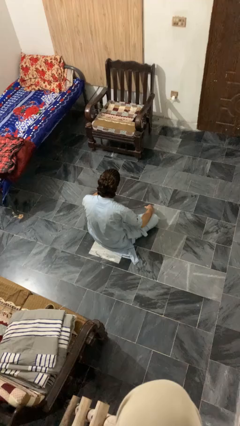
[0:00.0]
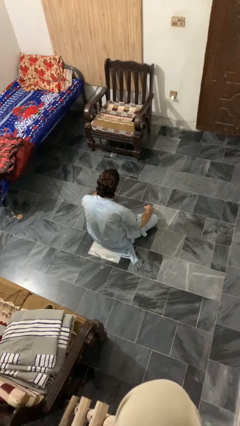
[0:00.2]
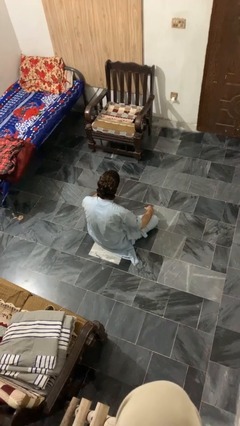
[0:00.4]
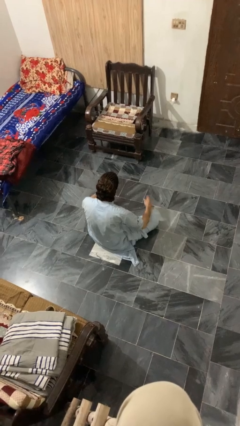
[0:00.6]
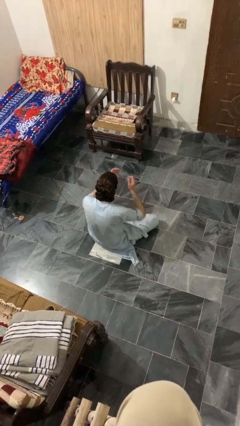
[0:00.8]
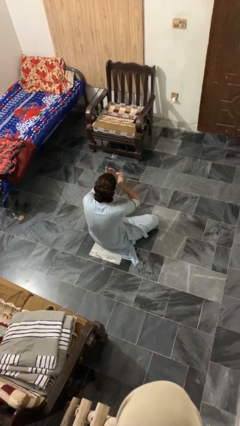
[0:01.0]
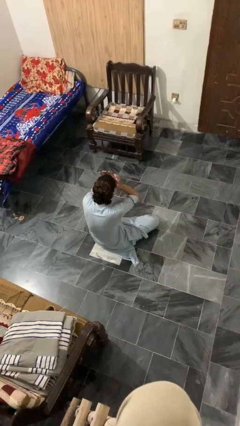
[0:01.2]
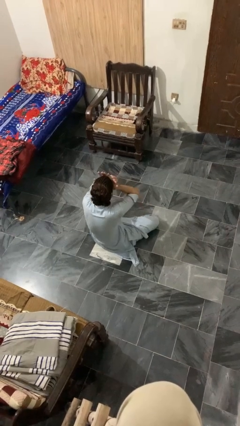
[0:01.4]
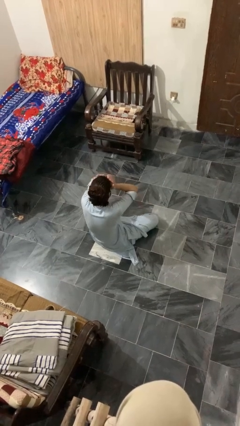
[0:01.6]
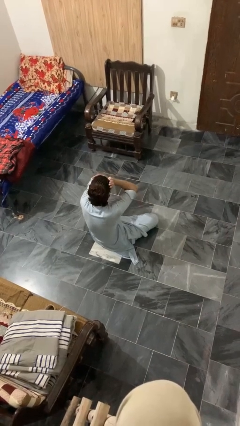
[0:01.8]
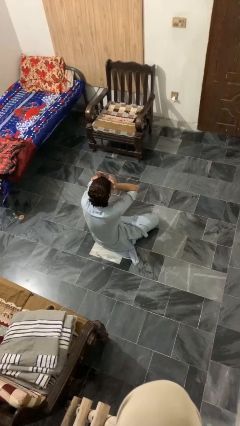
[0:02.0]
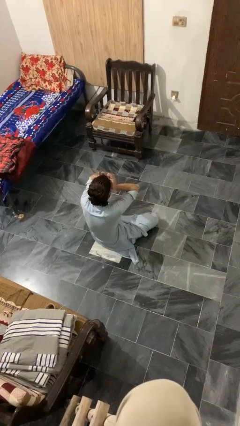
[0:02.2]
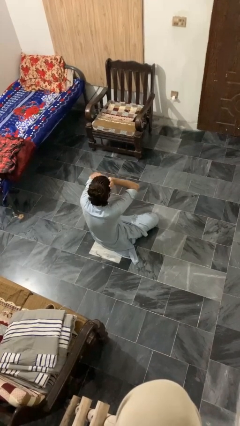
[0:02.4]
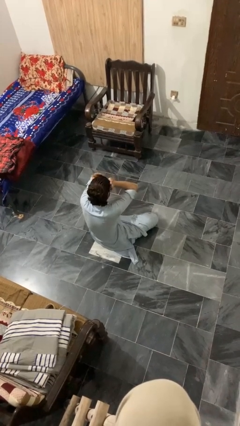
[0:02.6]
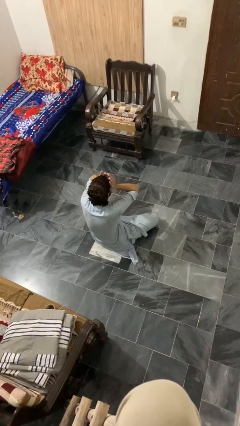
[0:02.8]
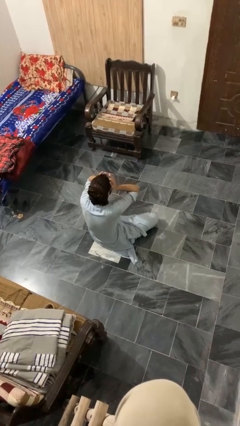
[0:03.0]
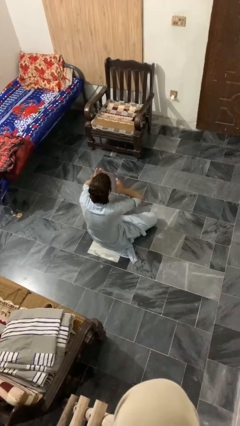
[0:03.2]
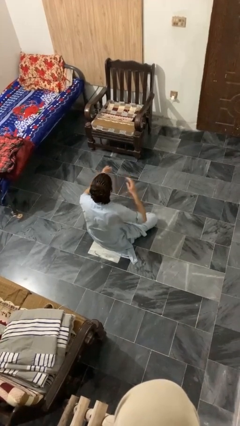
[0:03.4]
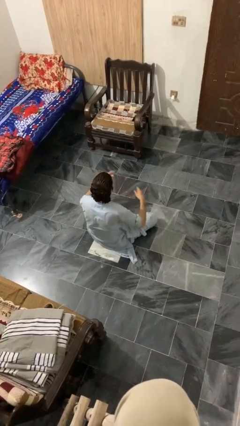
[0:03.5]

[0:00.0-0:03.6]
person rubs eyes

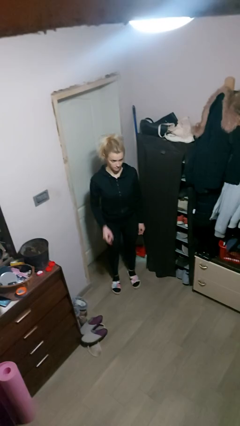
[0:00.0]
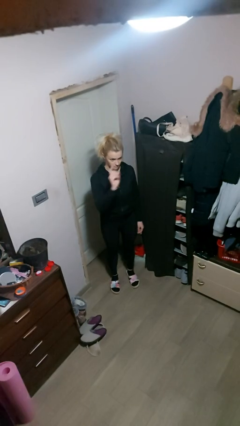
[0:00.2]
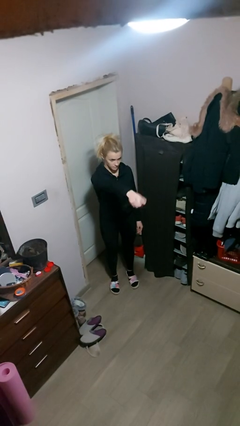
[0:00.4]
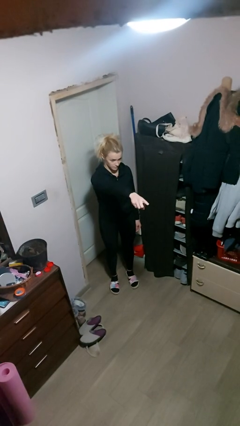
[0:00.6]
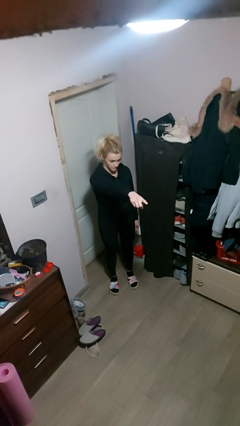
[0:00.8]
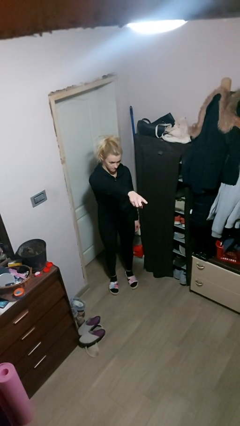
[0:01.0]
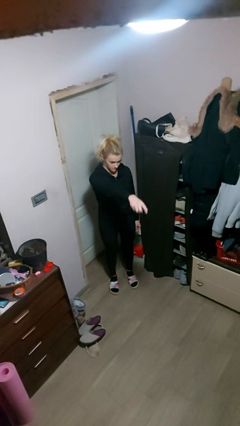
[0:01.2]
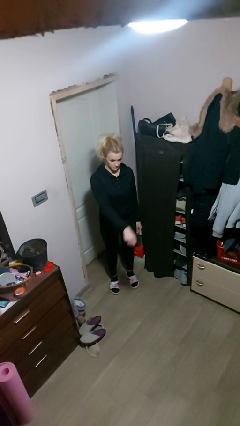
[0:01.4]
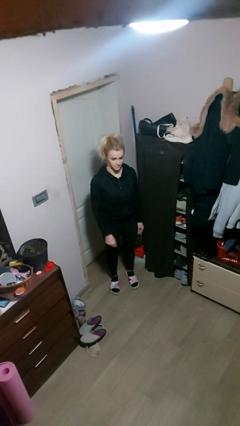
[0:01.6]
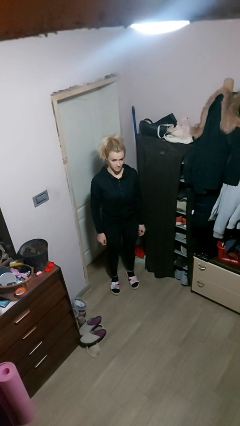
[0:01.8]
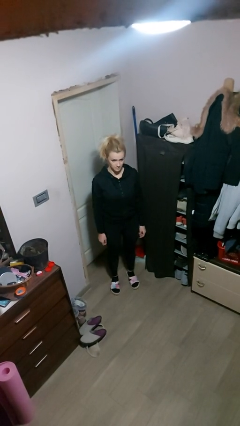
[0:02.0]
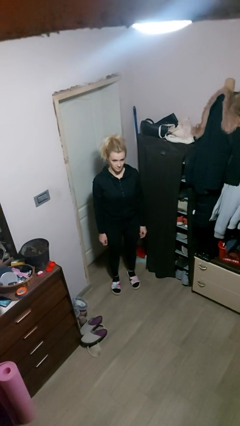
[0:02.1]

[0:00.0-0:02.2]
person points at person

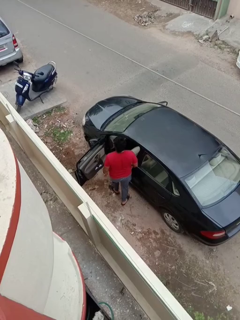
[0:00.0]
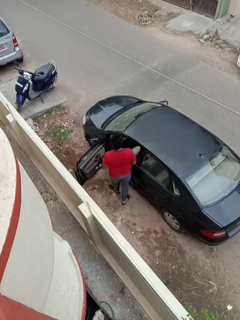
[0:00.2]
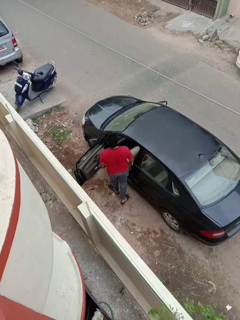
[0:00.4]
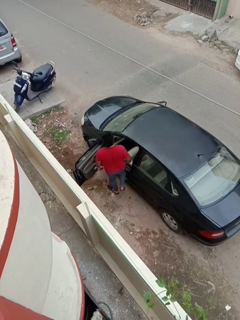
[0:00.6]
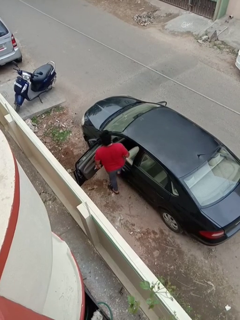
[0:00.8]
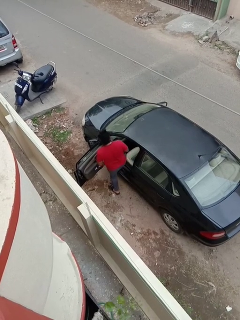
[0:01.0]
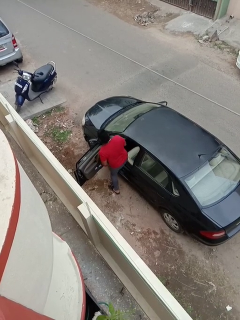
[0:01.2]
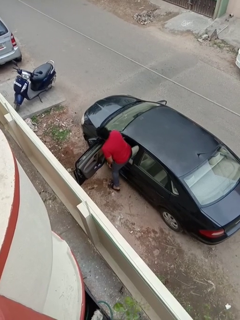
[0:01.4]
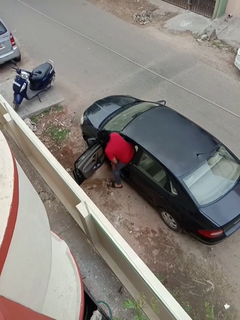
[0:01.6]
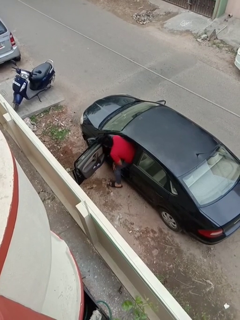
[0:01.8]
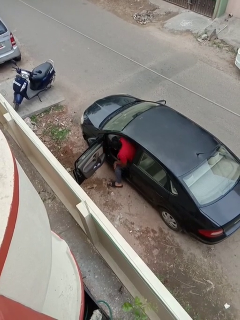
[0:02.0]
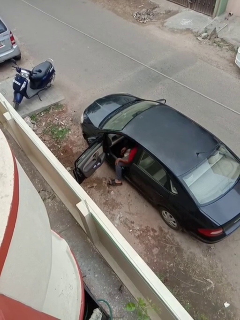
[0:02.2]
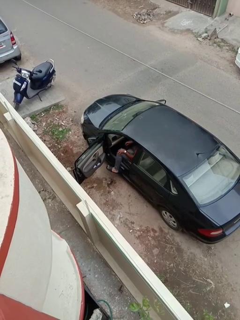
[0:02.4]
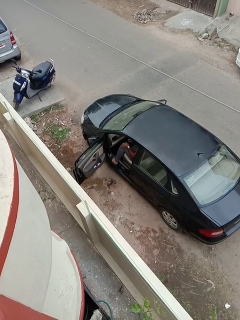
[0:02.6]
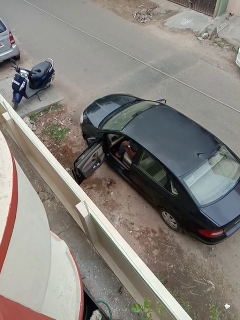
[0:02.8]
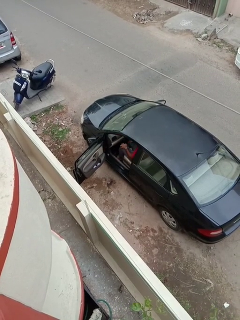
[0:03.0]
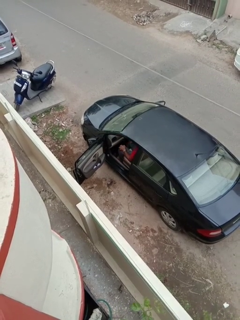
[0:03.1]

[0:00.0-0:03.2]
person enters car

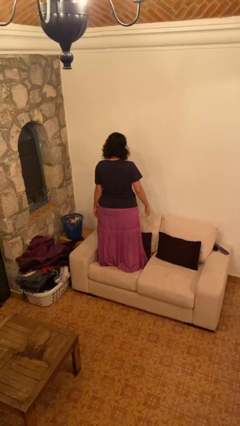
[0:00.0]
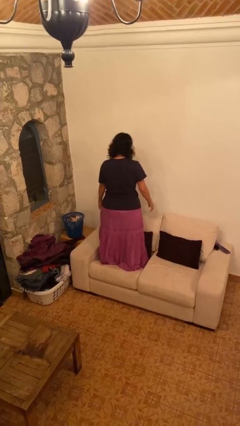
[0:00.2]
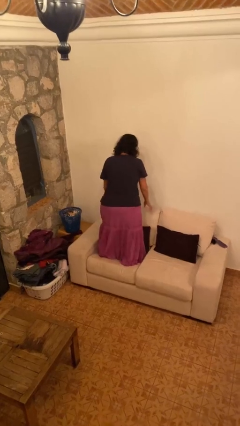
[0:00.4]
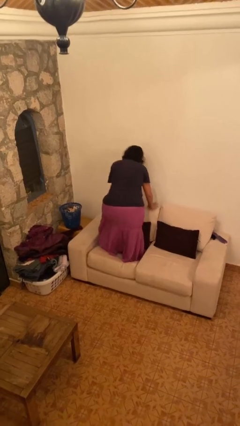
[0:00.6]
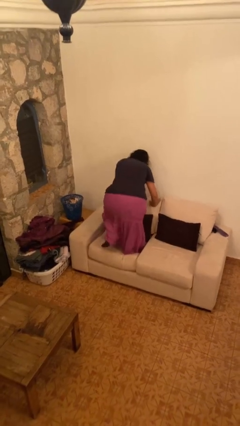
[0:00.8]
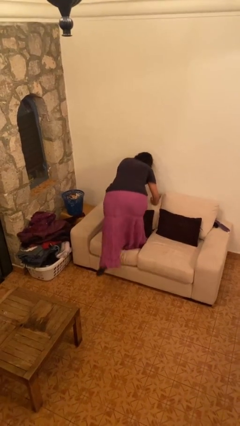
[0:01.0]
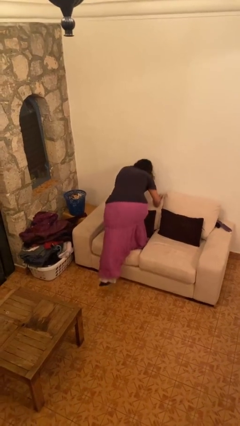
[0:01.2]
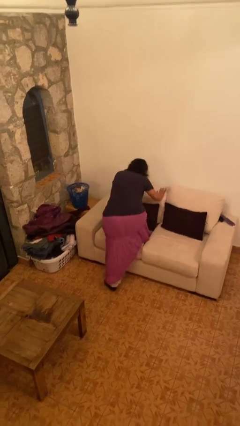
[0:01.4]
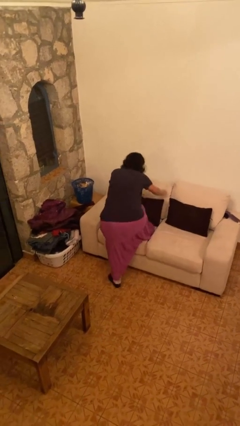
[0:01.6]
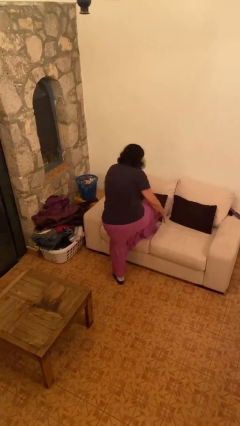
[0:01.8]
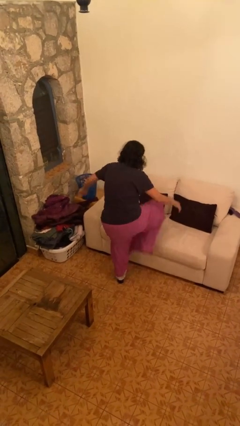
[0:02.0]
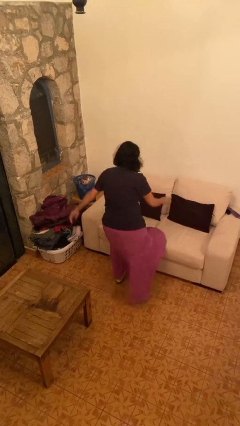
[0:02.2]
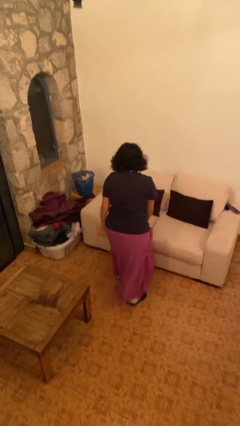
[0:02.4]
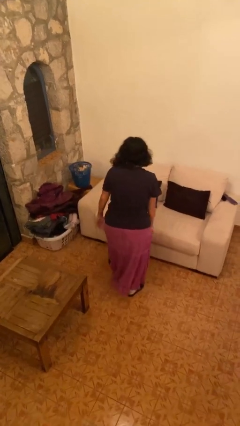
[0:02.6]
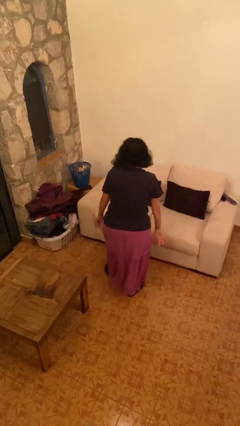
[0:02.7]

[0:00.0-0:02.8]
person climbs off couch

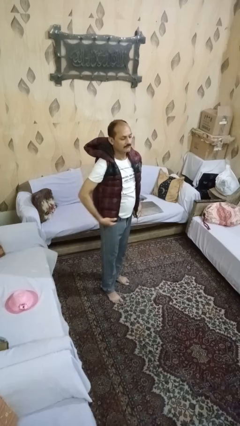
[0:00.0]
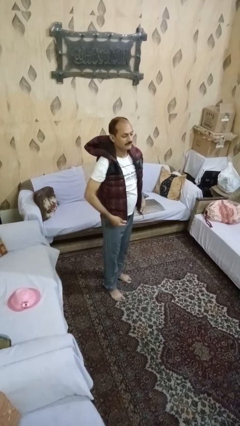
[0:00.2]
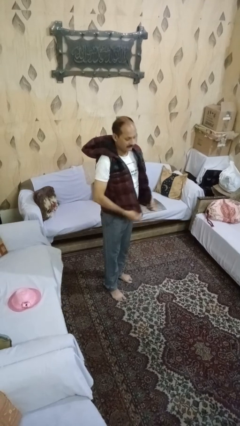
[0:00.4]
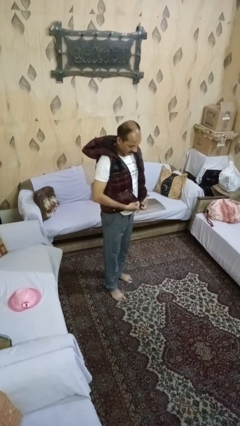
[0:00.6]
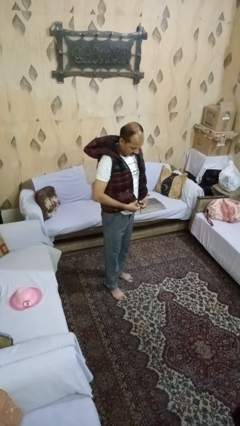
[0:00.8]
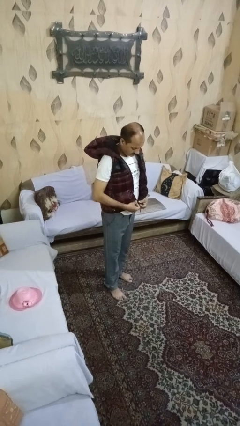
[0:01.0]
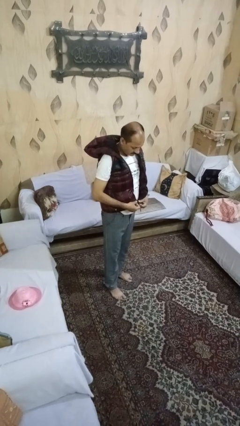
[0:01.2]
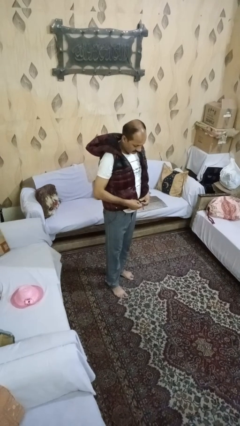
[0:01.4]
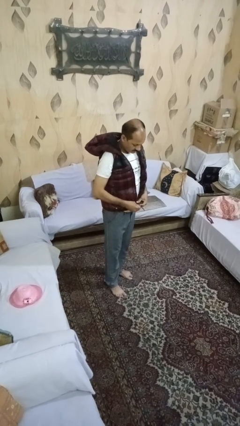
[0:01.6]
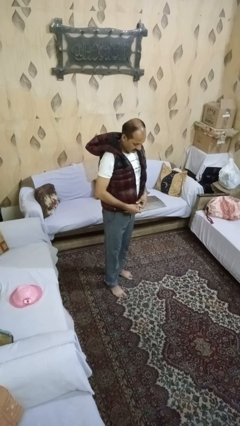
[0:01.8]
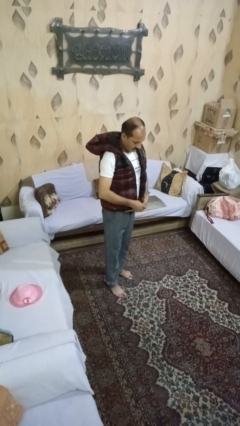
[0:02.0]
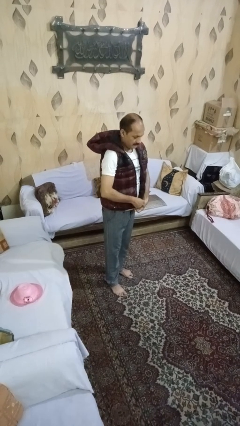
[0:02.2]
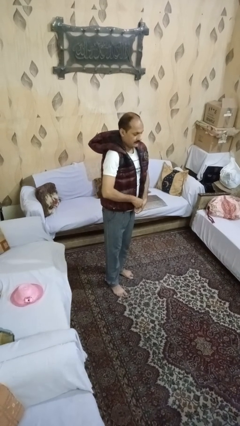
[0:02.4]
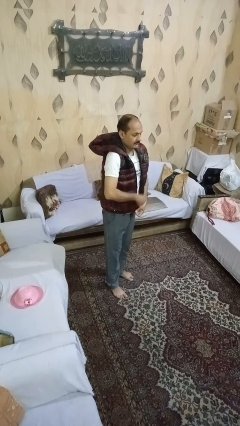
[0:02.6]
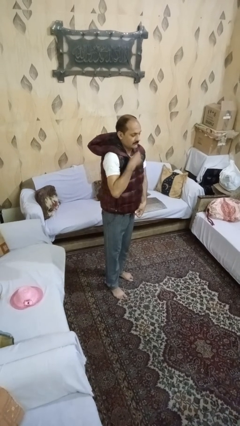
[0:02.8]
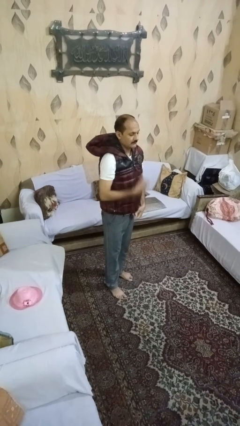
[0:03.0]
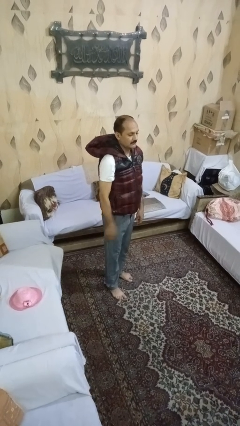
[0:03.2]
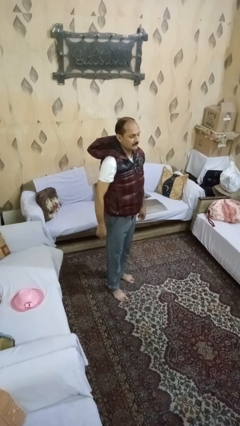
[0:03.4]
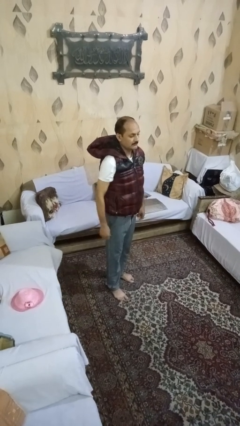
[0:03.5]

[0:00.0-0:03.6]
person zips up jacket

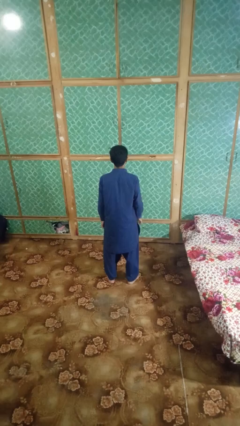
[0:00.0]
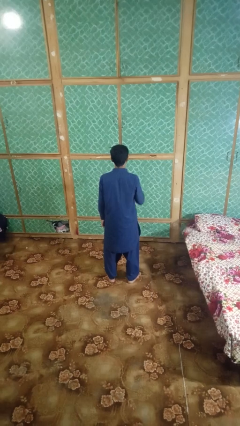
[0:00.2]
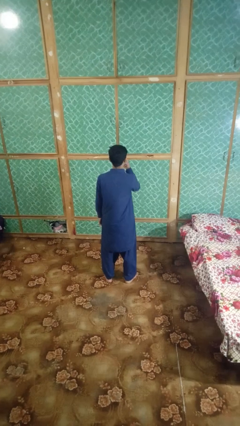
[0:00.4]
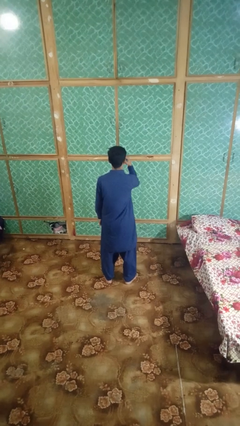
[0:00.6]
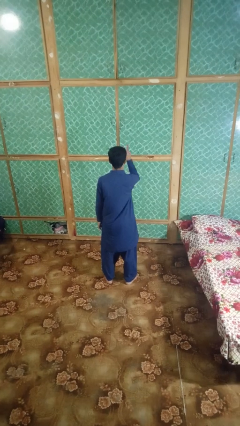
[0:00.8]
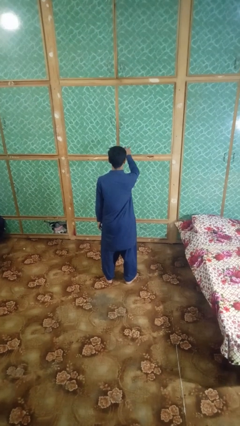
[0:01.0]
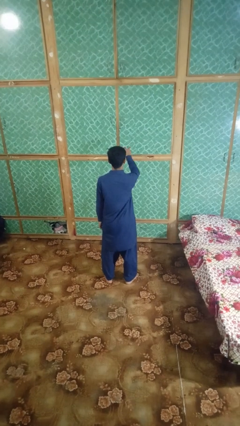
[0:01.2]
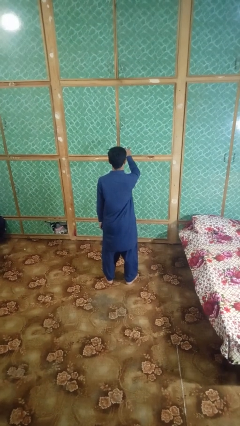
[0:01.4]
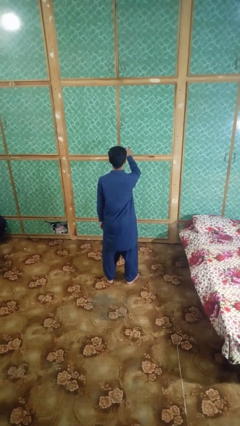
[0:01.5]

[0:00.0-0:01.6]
person gestures watch closely

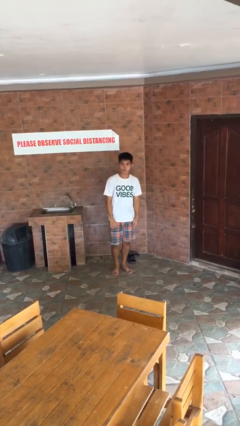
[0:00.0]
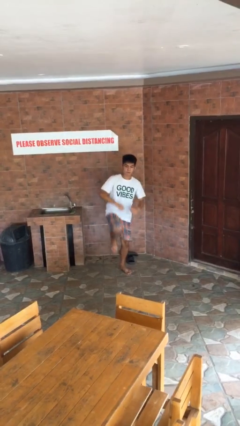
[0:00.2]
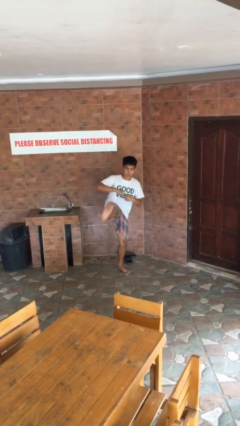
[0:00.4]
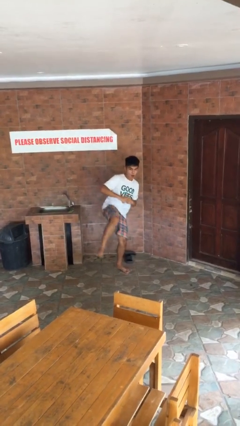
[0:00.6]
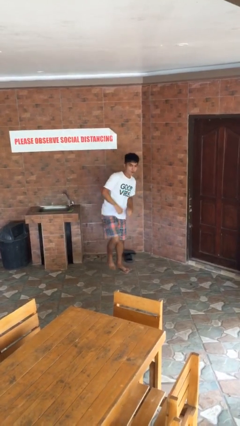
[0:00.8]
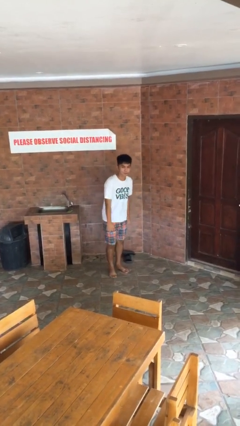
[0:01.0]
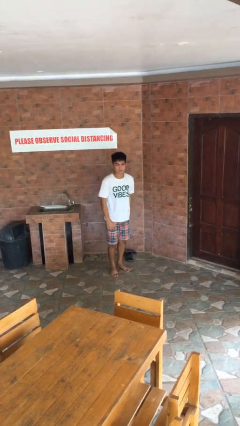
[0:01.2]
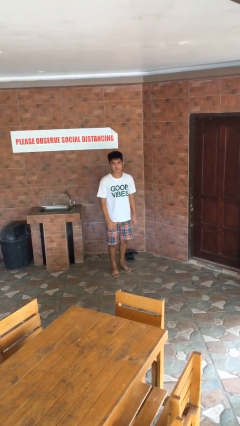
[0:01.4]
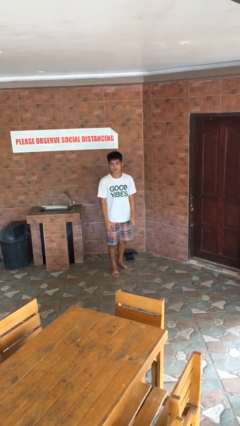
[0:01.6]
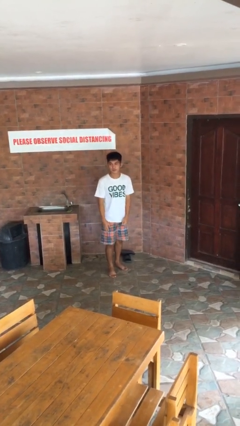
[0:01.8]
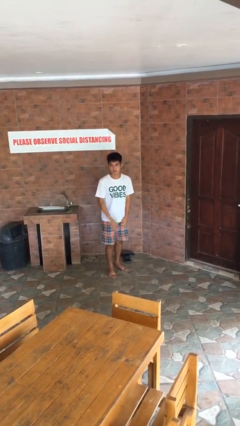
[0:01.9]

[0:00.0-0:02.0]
person karate kicks
